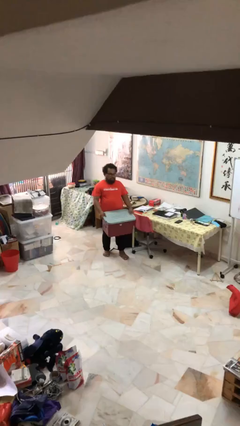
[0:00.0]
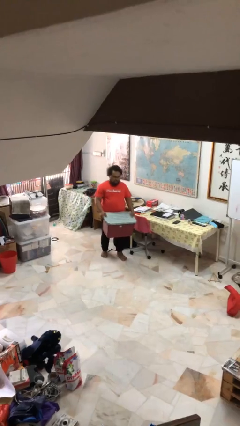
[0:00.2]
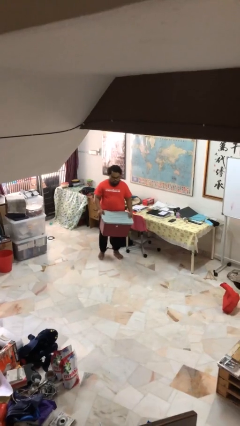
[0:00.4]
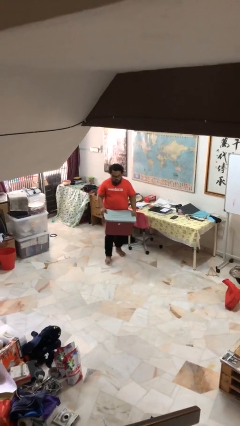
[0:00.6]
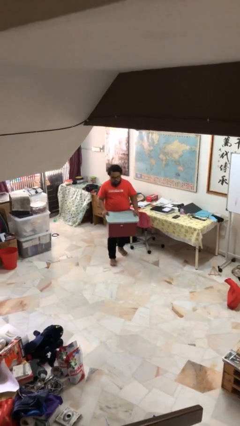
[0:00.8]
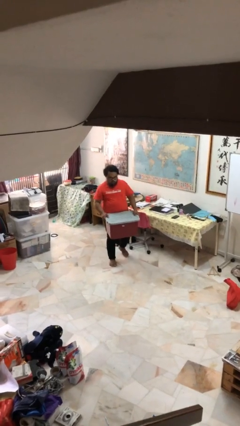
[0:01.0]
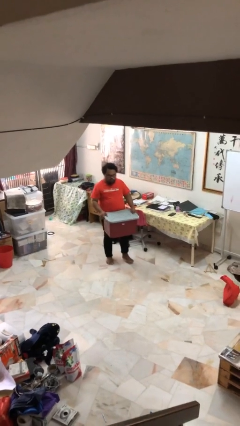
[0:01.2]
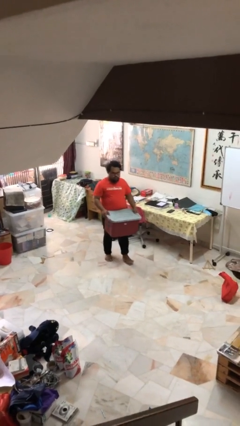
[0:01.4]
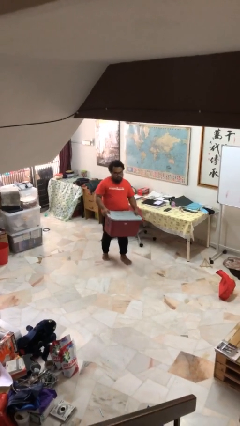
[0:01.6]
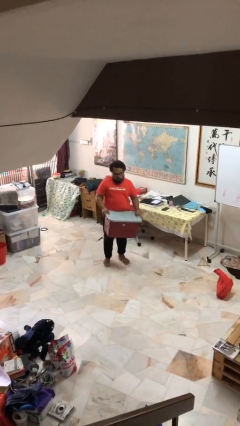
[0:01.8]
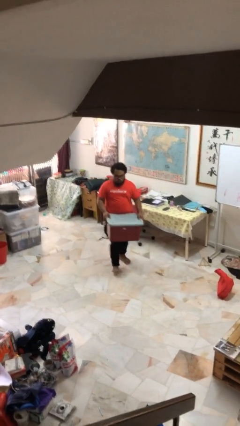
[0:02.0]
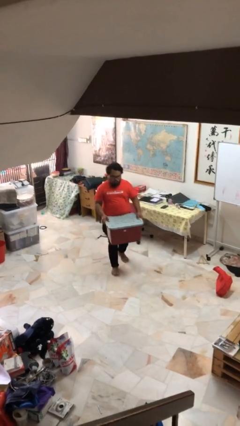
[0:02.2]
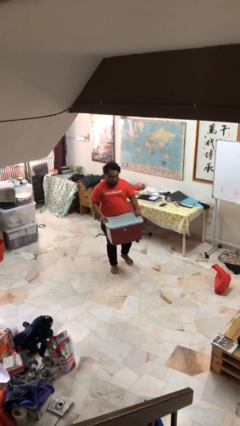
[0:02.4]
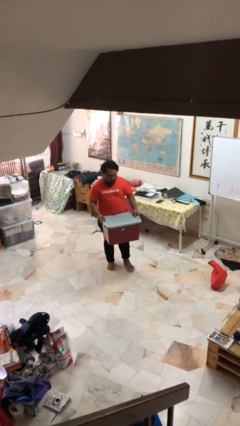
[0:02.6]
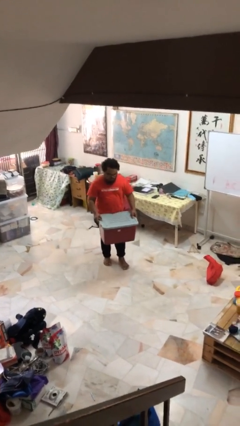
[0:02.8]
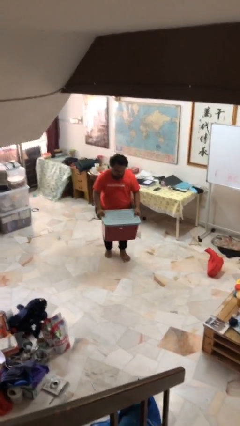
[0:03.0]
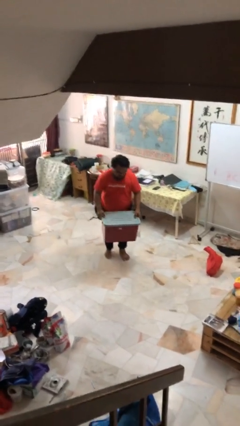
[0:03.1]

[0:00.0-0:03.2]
person carries heavy object

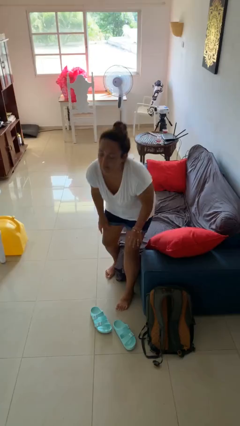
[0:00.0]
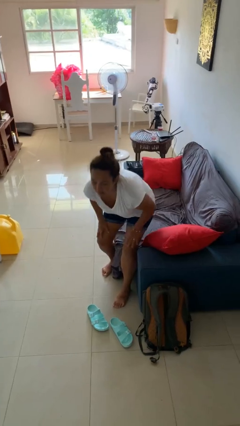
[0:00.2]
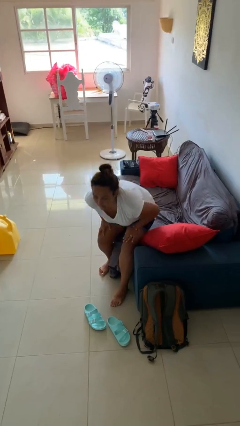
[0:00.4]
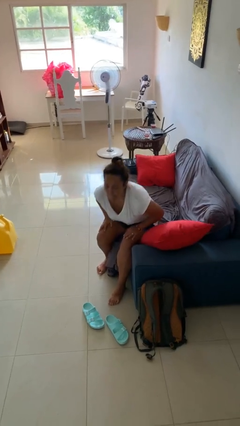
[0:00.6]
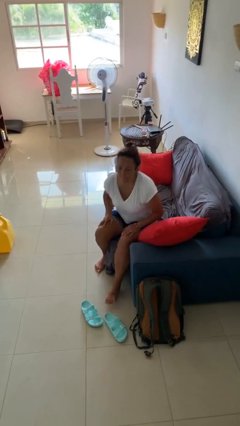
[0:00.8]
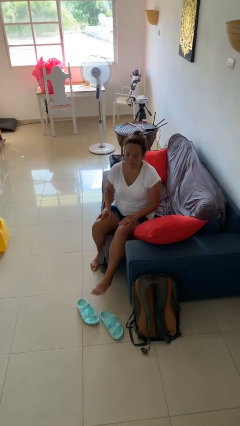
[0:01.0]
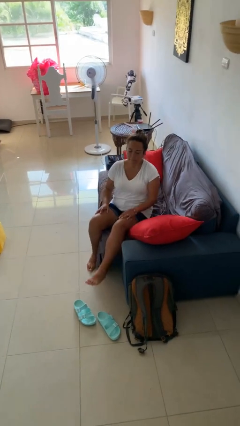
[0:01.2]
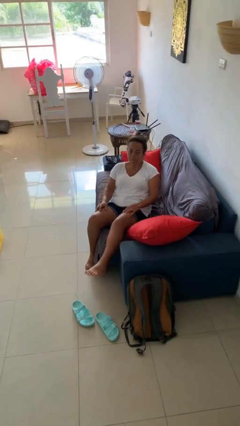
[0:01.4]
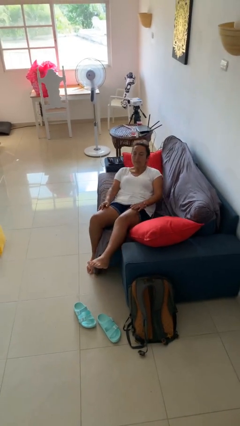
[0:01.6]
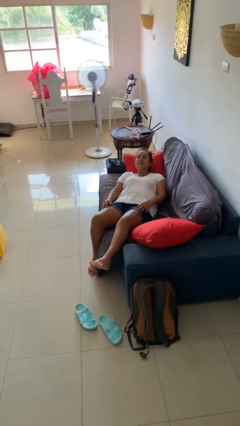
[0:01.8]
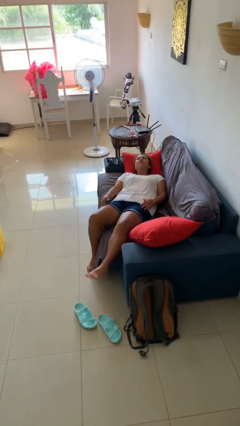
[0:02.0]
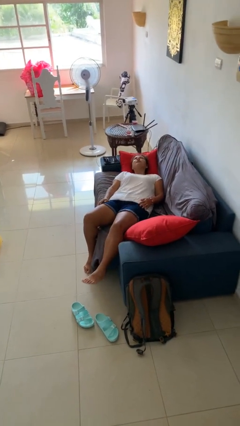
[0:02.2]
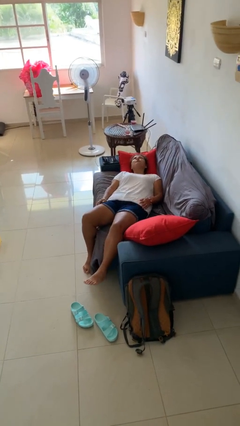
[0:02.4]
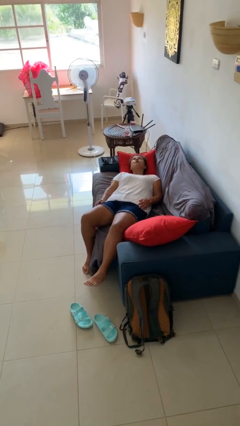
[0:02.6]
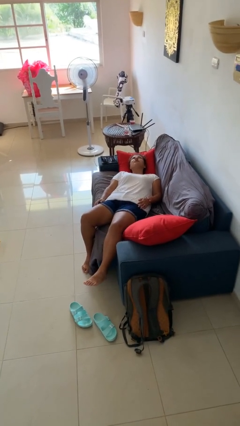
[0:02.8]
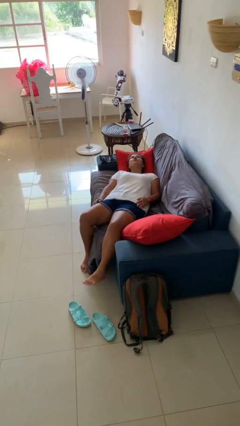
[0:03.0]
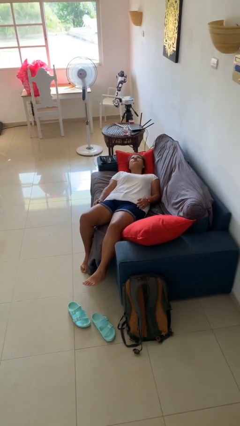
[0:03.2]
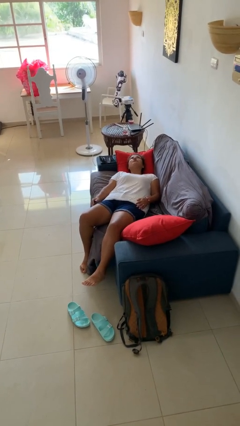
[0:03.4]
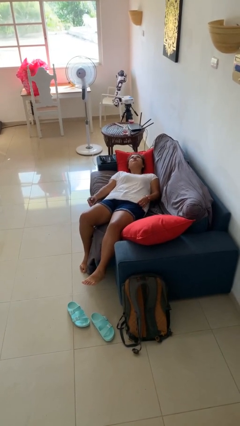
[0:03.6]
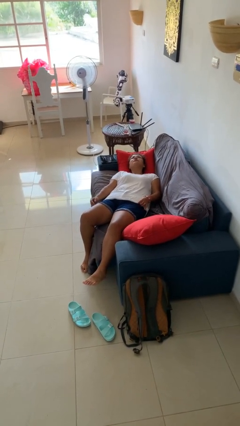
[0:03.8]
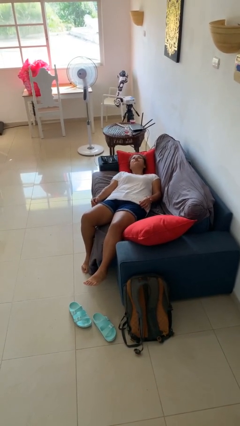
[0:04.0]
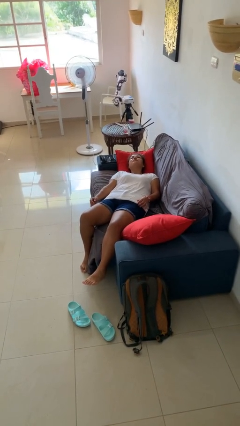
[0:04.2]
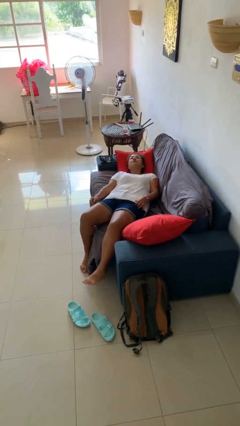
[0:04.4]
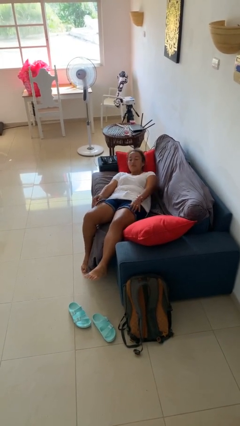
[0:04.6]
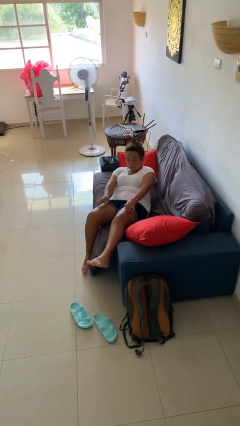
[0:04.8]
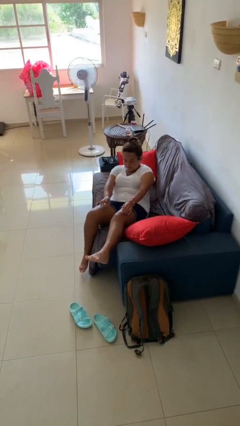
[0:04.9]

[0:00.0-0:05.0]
person lies down on couch

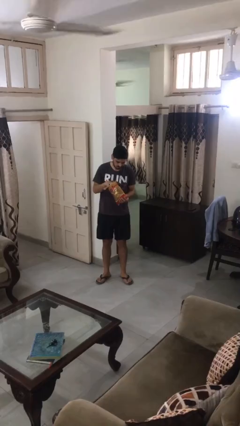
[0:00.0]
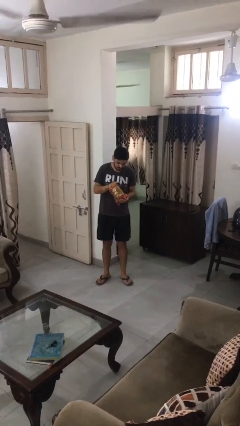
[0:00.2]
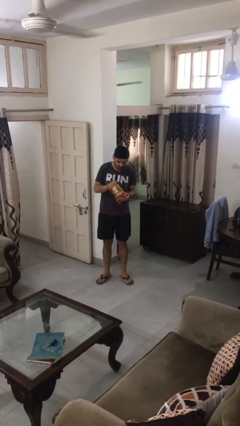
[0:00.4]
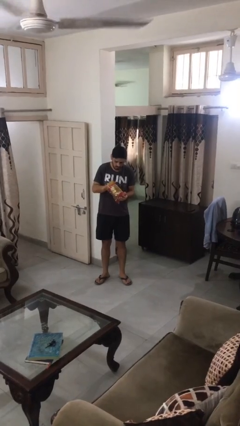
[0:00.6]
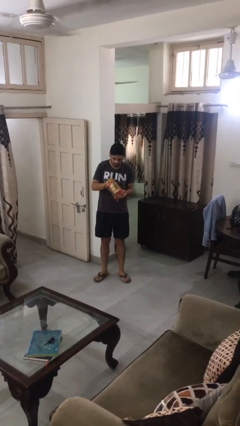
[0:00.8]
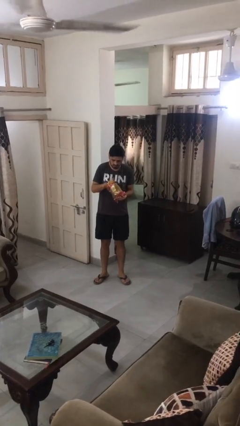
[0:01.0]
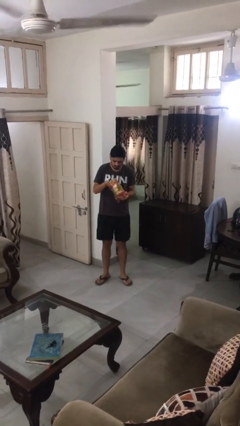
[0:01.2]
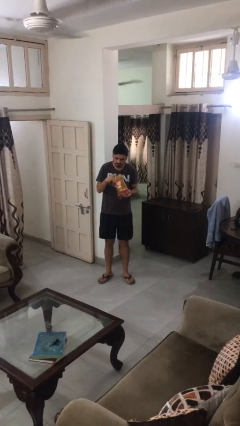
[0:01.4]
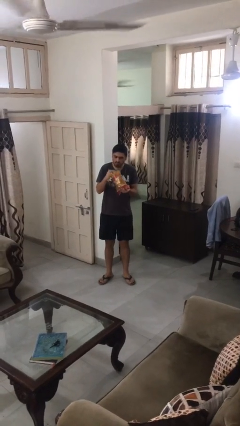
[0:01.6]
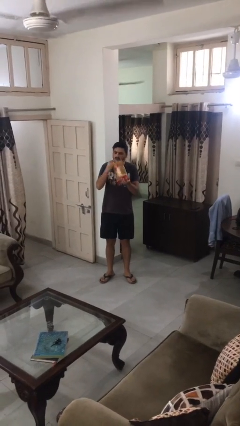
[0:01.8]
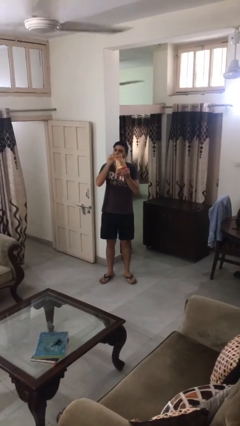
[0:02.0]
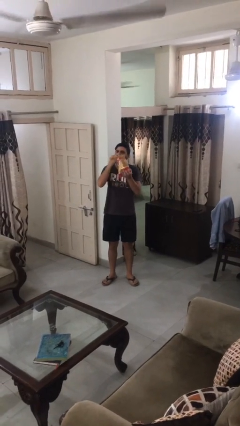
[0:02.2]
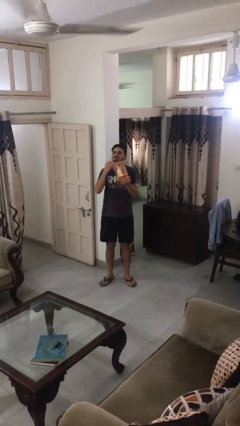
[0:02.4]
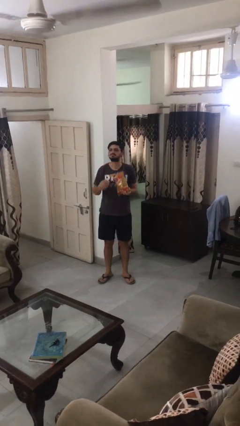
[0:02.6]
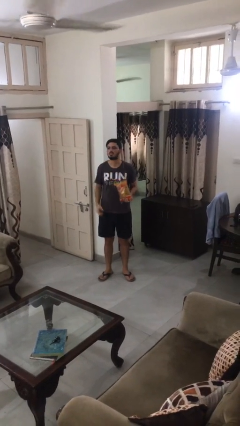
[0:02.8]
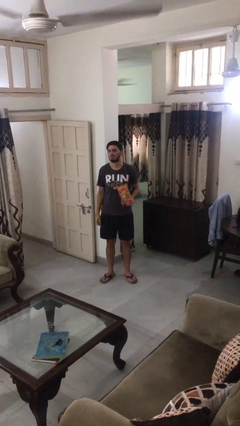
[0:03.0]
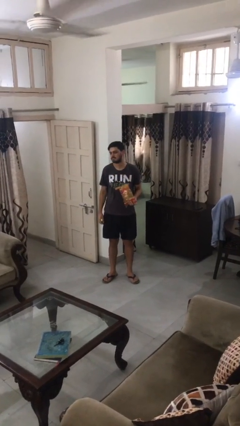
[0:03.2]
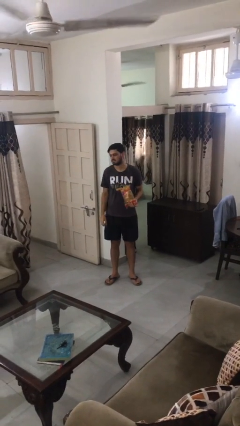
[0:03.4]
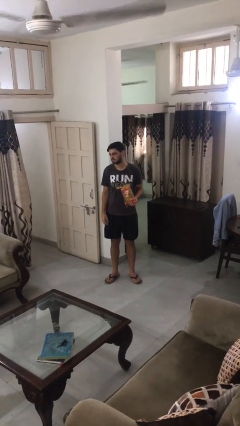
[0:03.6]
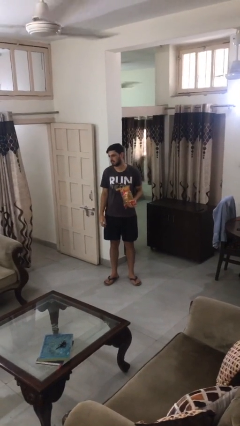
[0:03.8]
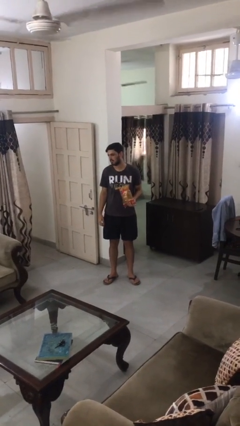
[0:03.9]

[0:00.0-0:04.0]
person eats snack from bag

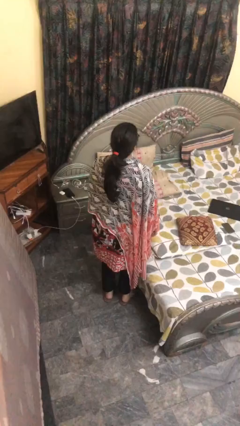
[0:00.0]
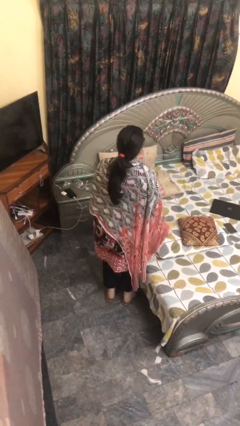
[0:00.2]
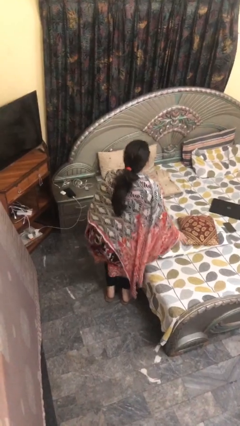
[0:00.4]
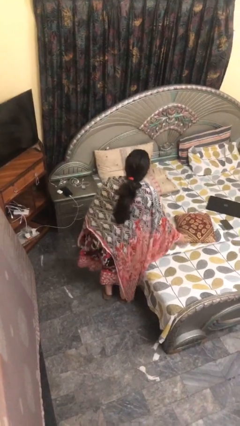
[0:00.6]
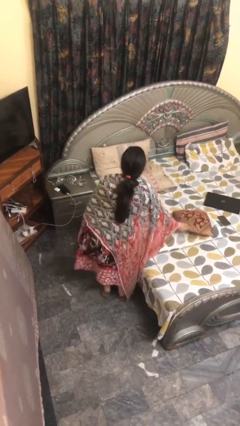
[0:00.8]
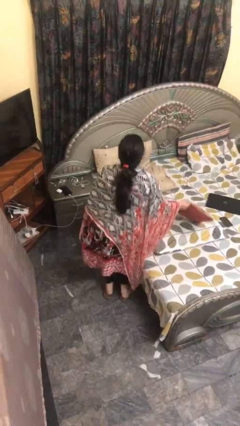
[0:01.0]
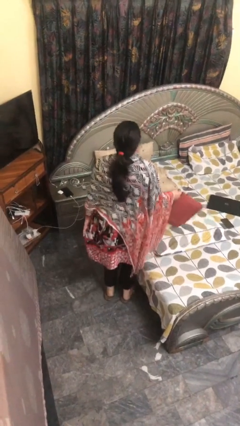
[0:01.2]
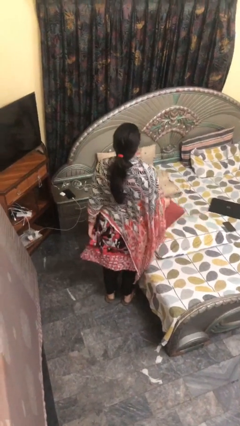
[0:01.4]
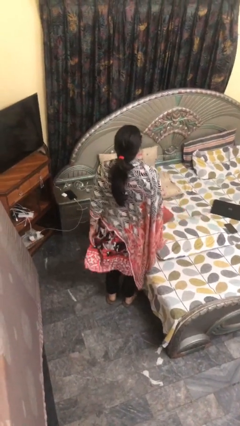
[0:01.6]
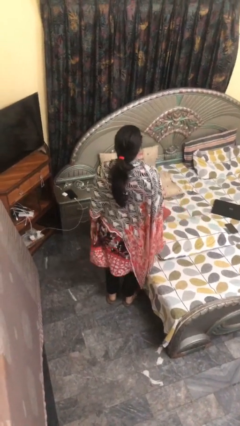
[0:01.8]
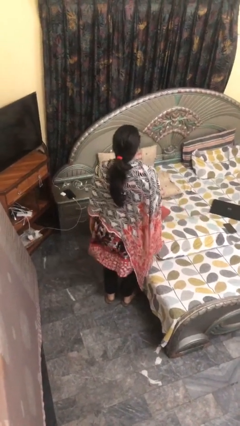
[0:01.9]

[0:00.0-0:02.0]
person picks up object from bed

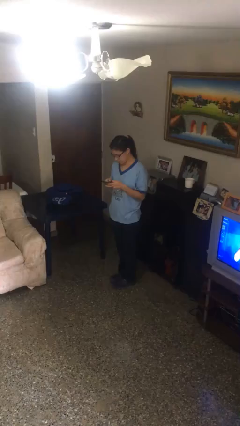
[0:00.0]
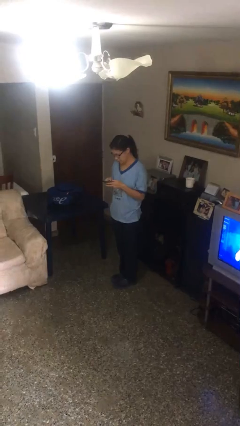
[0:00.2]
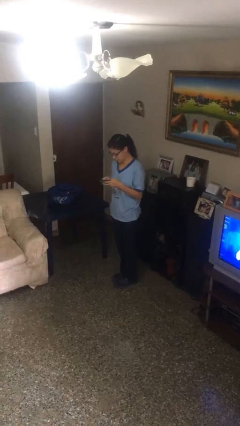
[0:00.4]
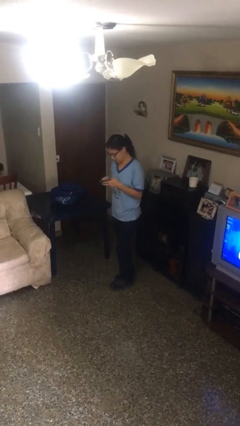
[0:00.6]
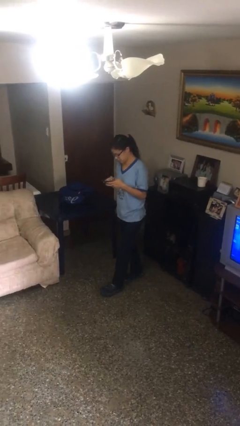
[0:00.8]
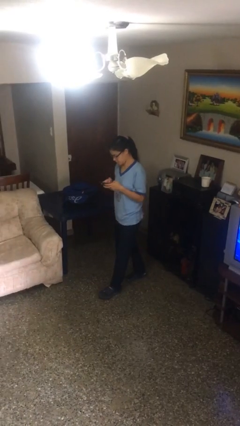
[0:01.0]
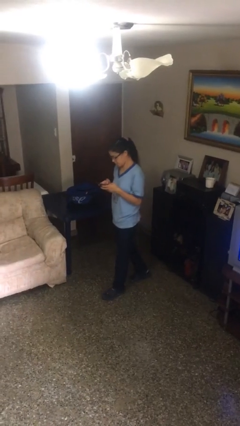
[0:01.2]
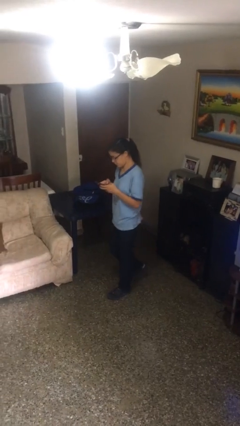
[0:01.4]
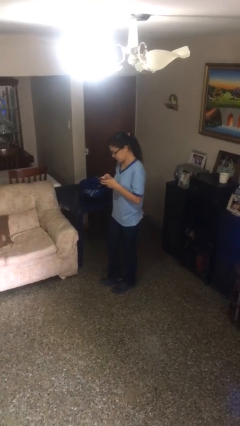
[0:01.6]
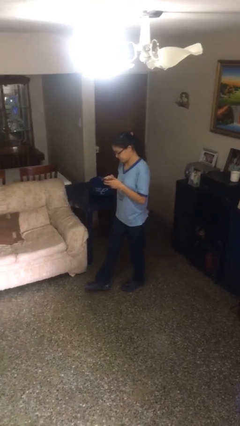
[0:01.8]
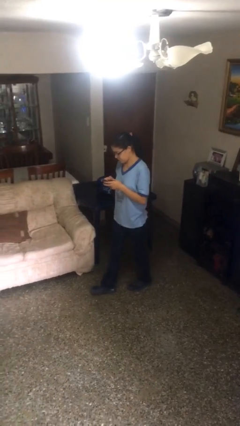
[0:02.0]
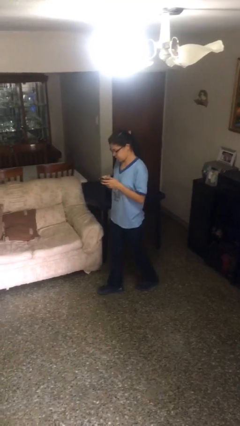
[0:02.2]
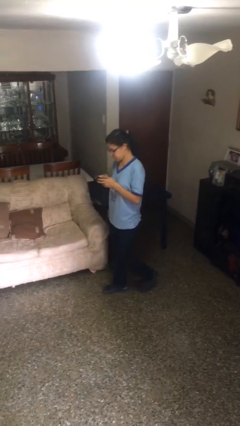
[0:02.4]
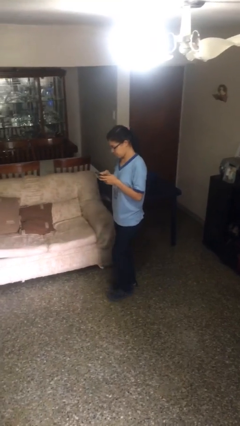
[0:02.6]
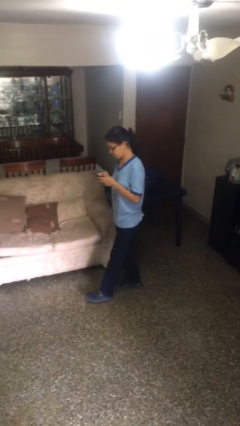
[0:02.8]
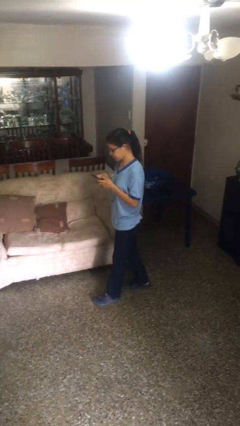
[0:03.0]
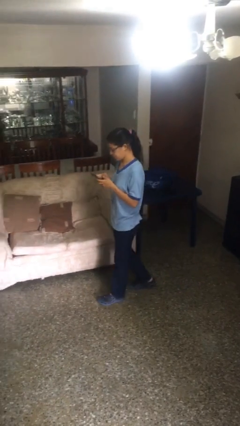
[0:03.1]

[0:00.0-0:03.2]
person texts on phone
